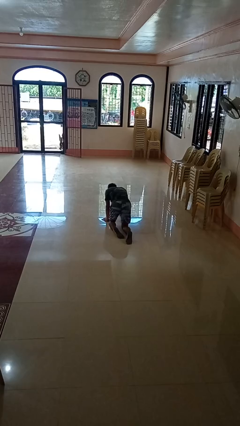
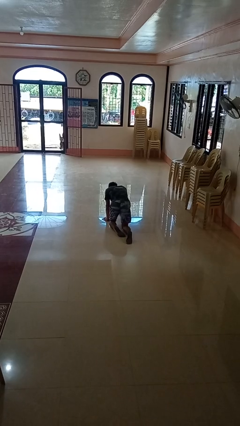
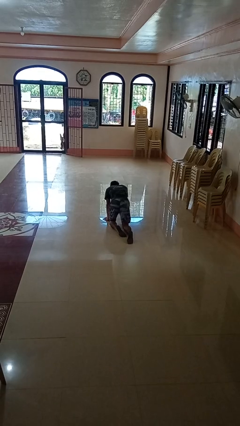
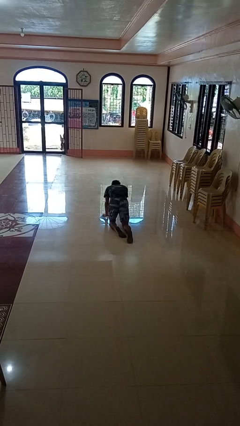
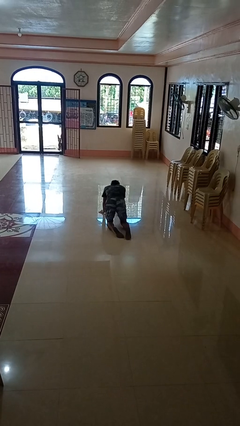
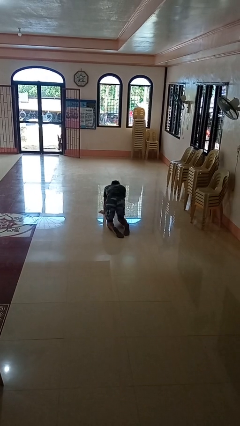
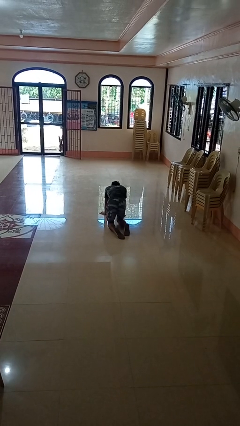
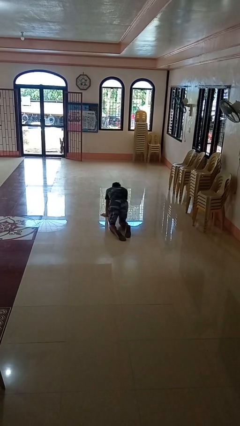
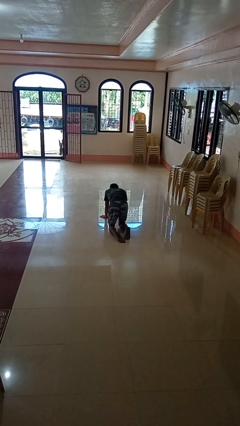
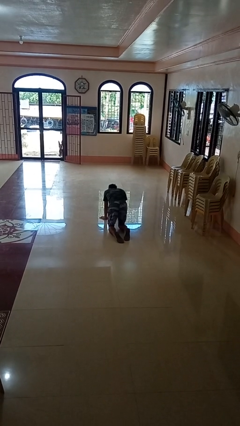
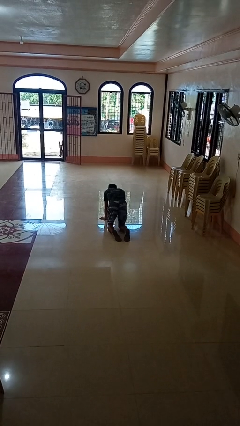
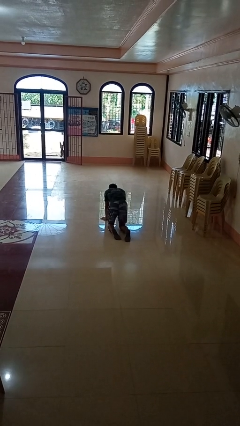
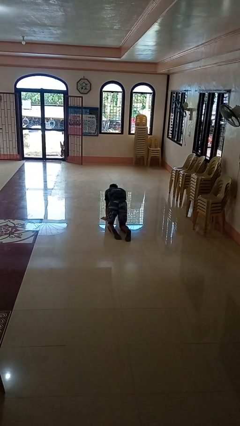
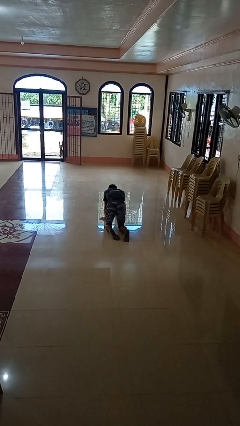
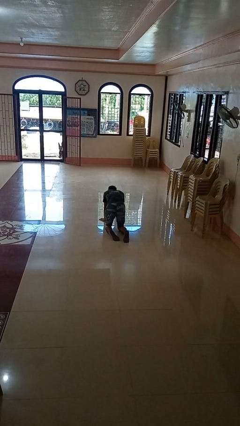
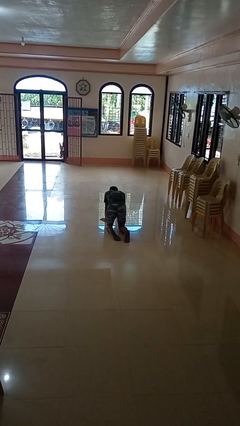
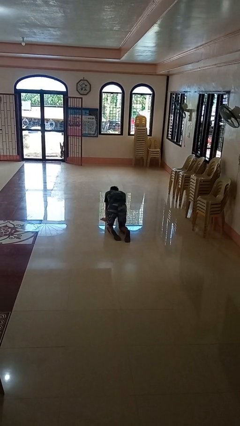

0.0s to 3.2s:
person crawls

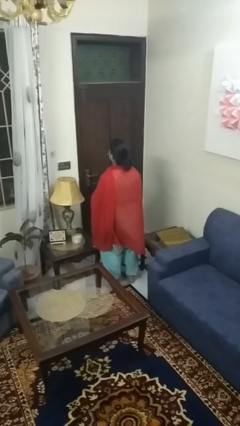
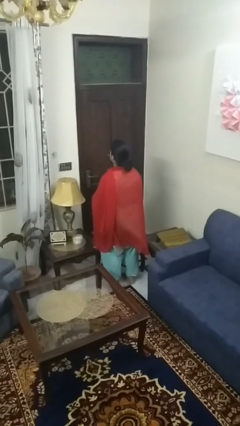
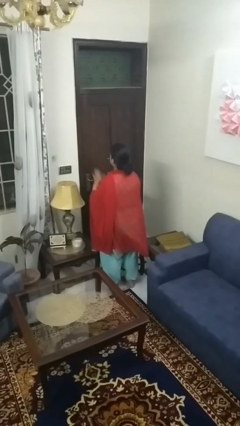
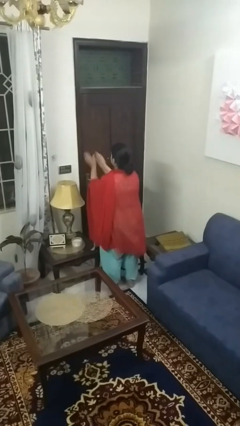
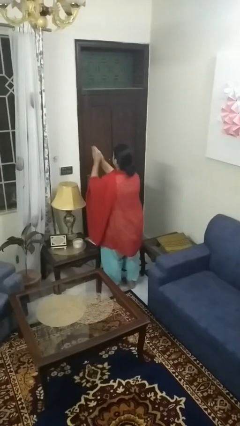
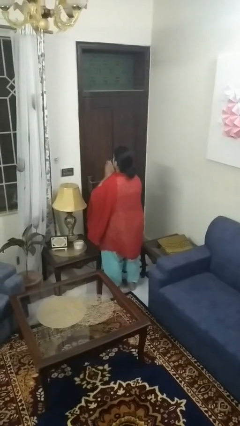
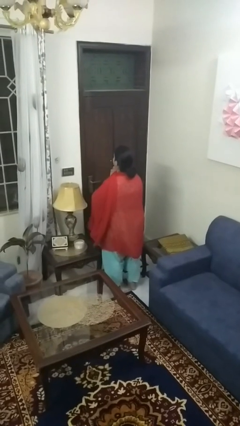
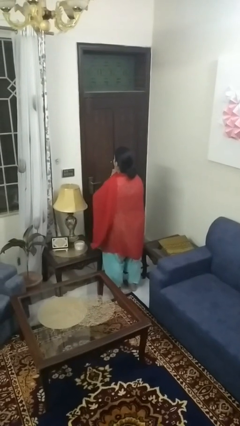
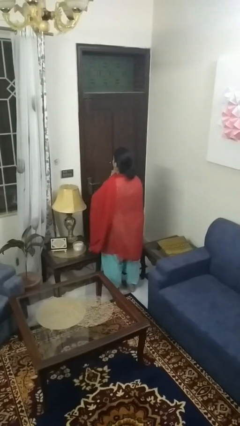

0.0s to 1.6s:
person swats bug

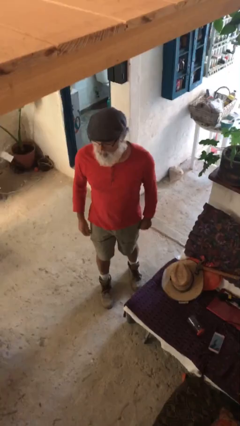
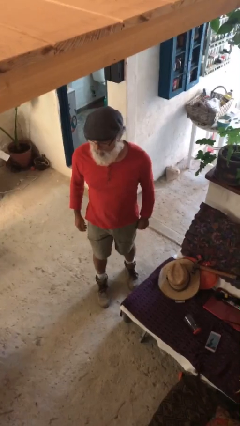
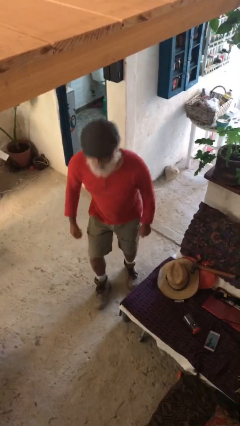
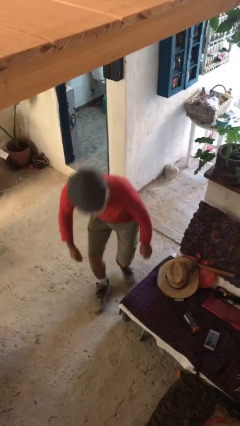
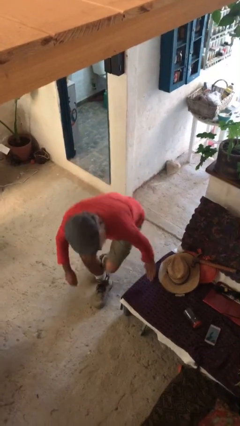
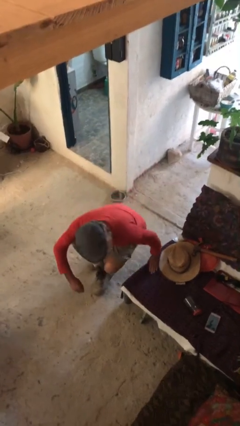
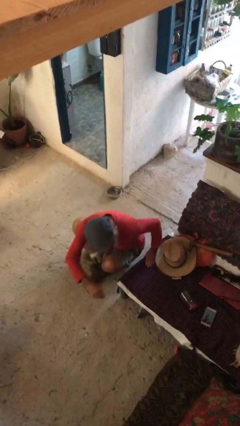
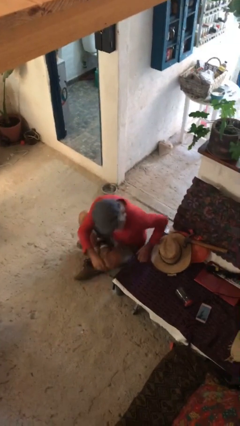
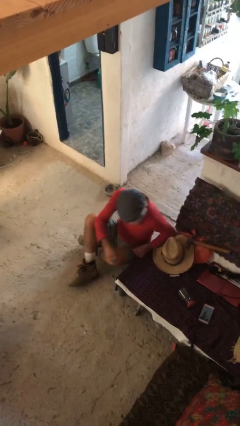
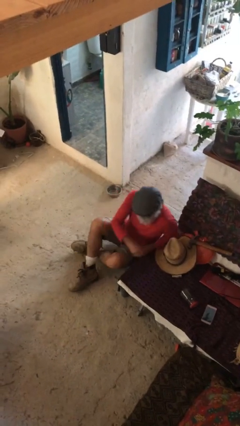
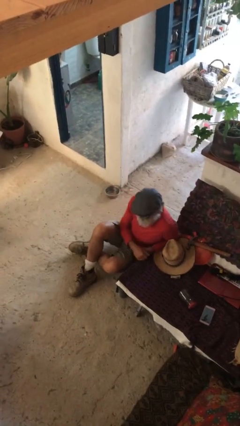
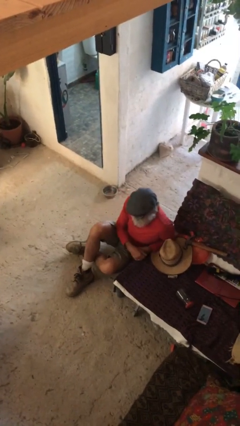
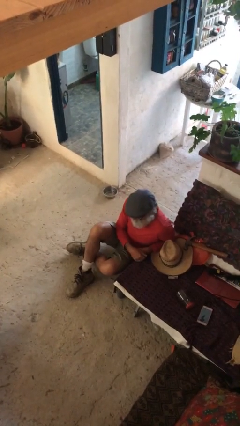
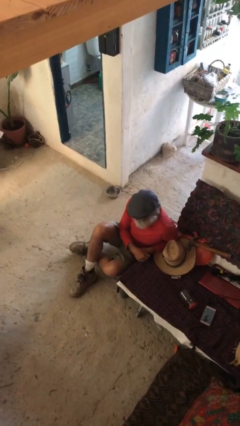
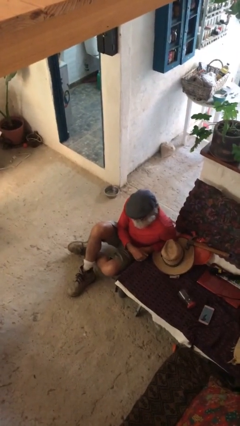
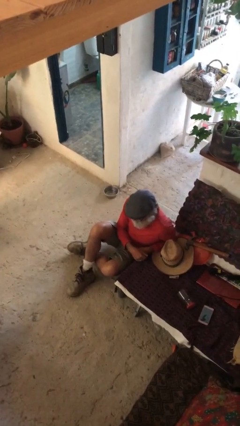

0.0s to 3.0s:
person sits down

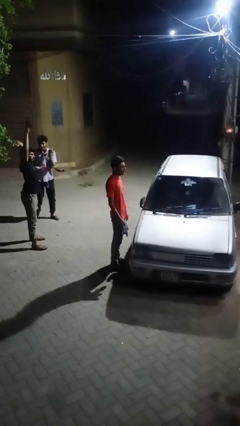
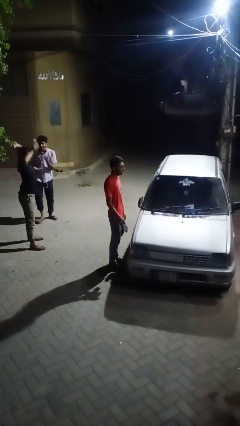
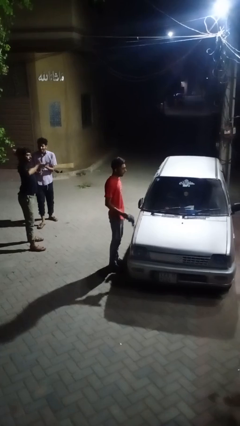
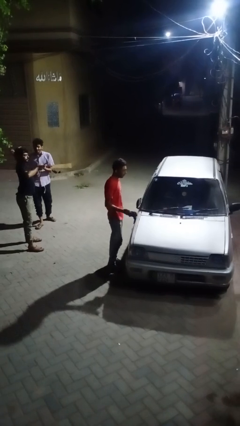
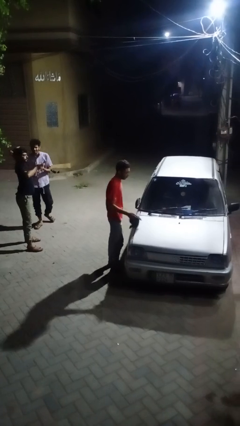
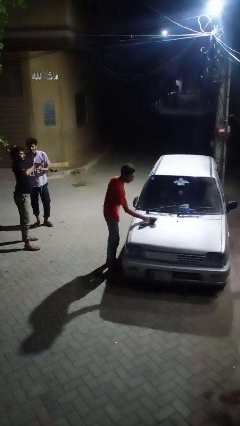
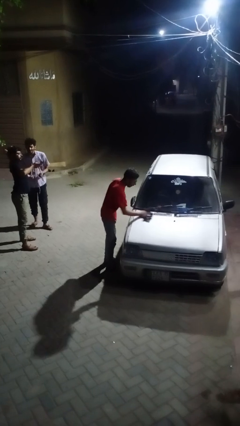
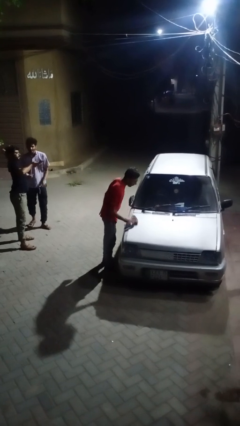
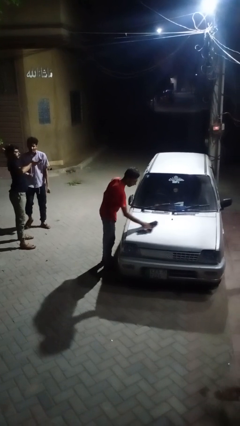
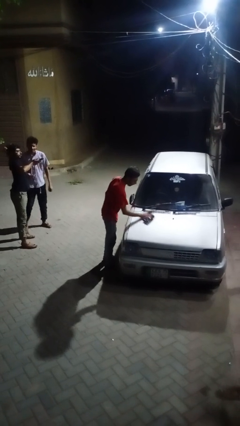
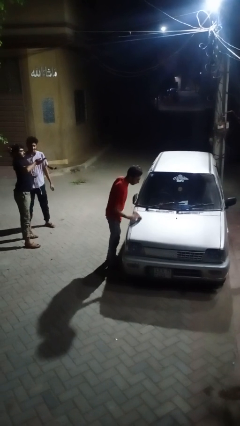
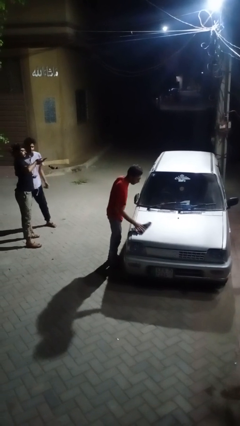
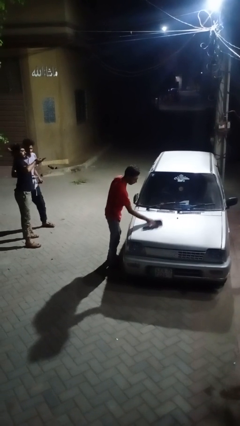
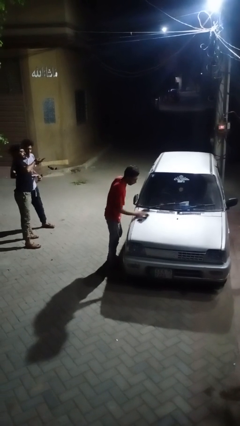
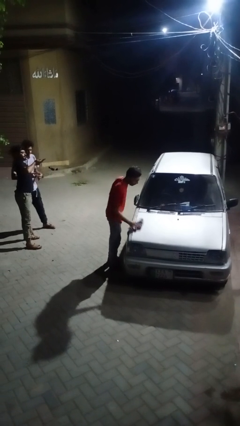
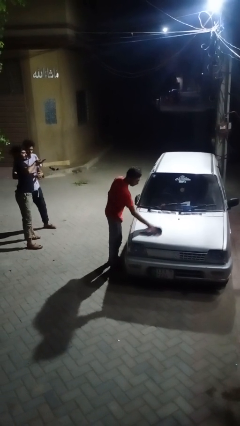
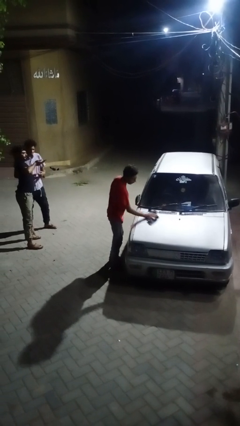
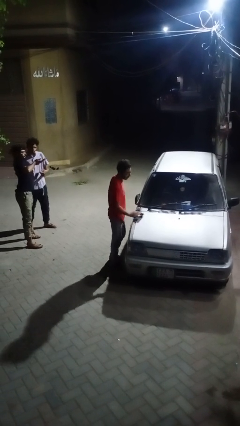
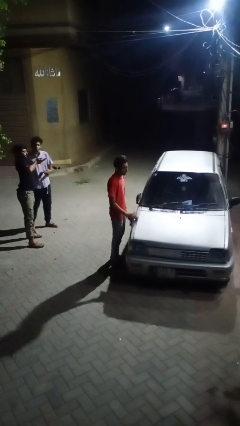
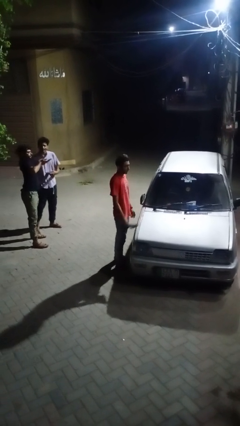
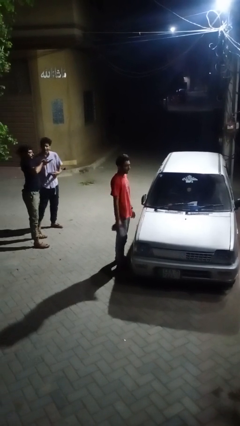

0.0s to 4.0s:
person polishes car with rag

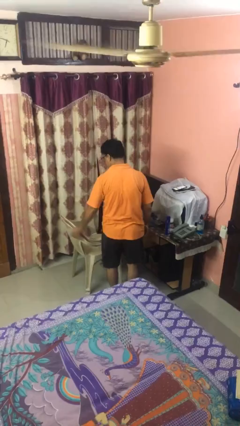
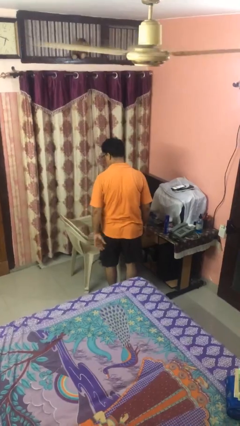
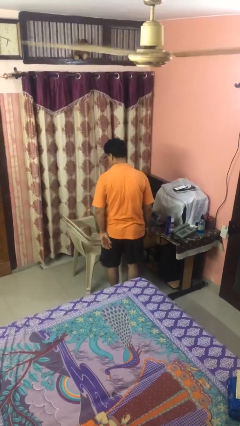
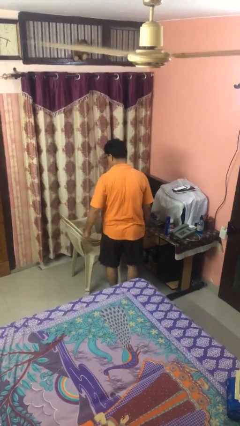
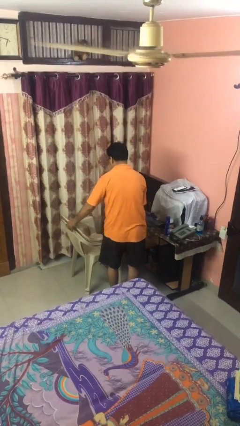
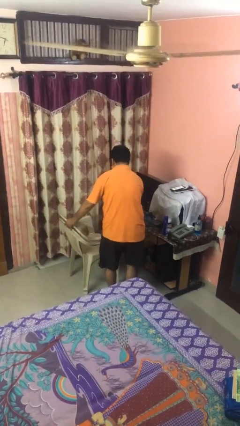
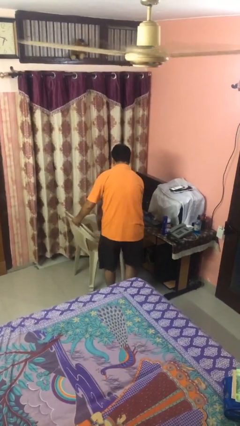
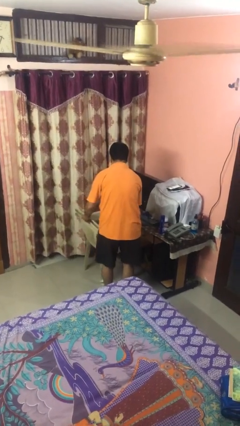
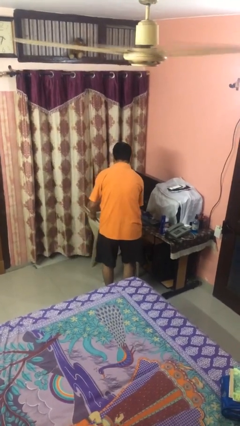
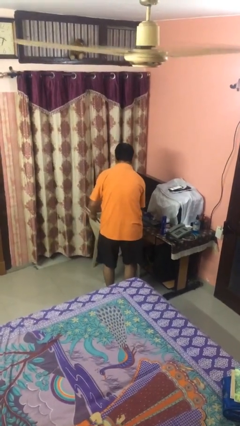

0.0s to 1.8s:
person pushes in chair

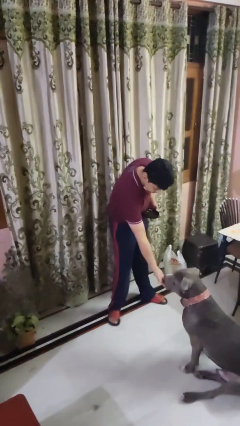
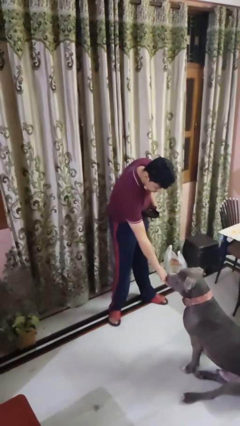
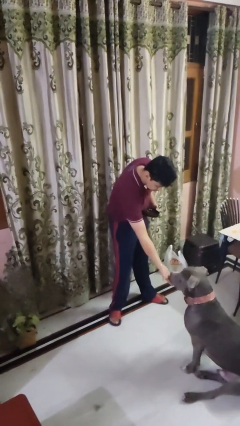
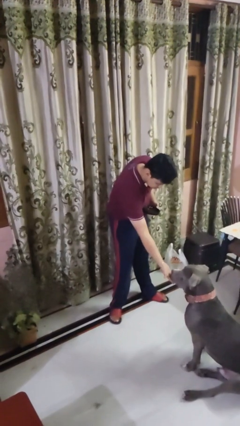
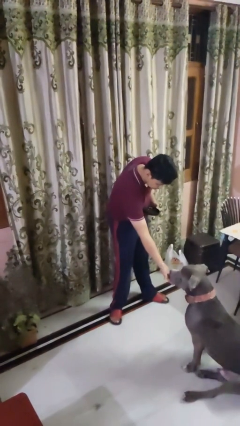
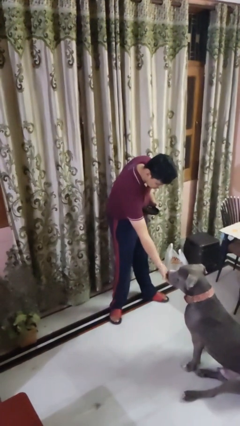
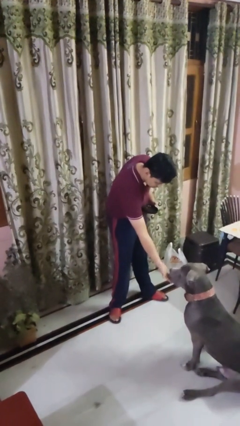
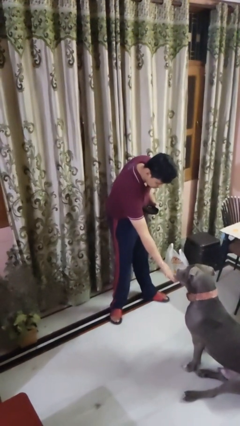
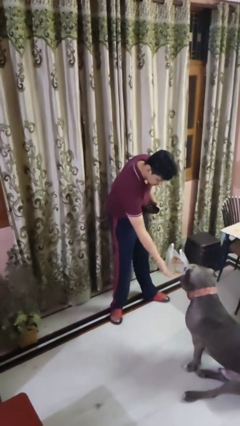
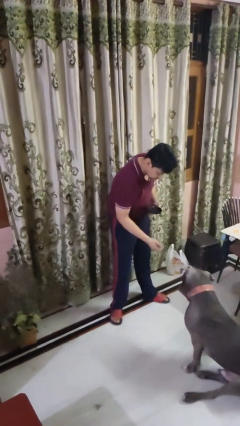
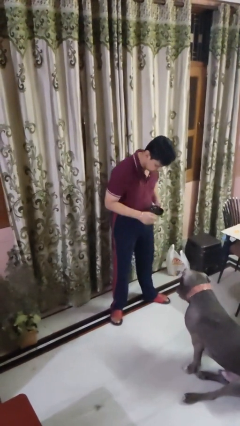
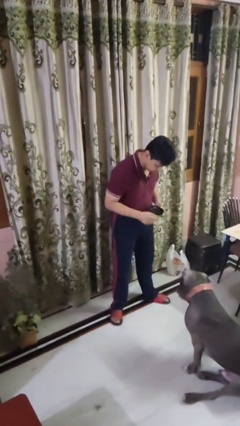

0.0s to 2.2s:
person feeds dog

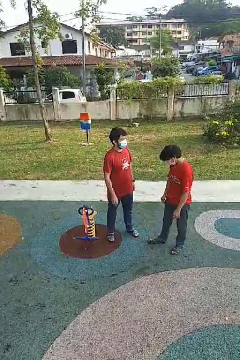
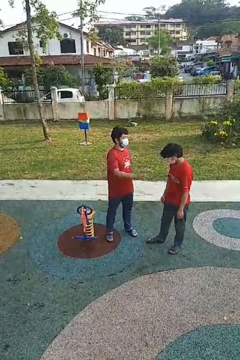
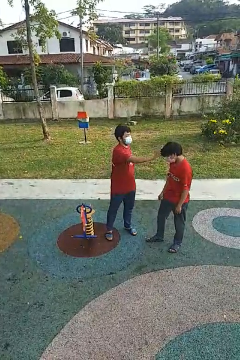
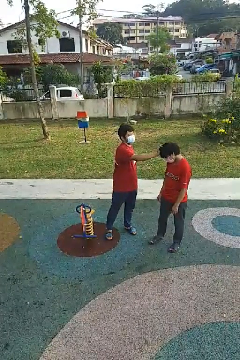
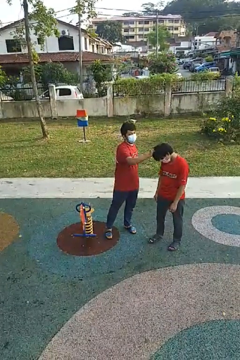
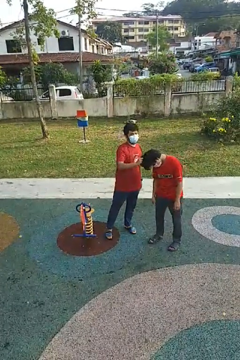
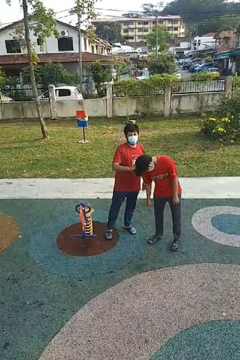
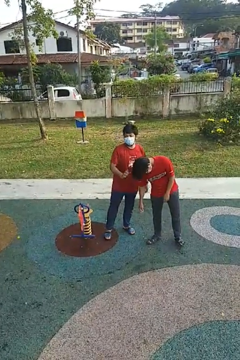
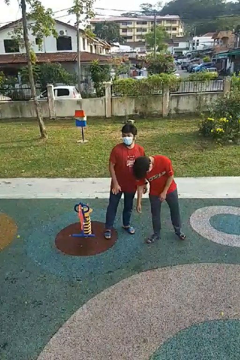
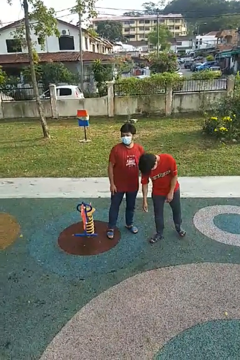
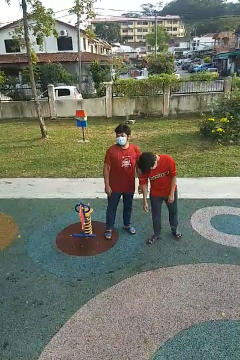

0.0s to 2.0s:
person grabs person by hair
